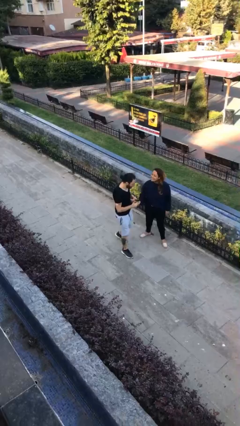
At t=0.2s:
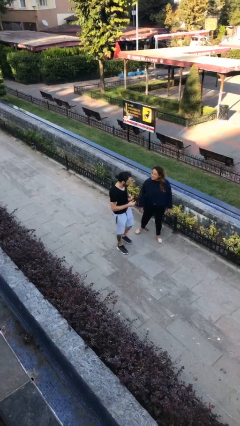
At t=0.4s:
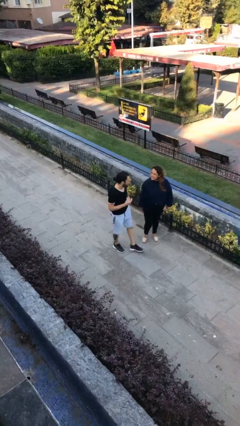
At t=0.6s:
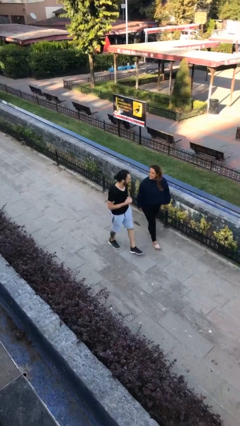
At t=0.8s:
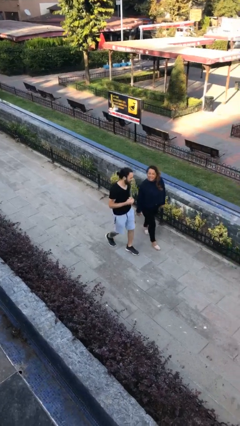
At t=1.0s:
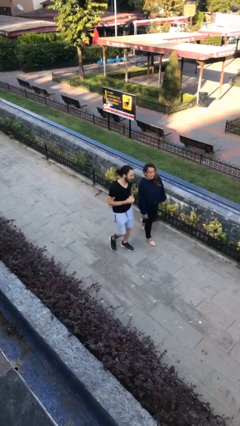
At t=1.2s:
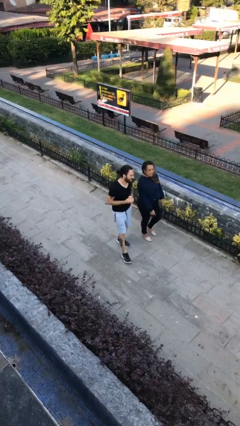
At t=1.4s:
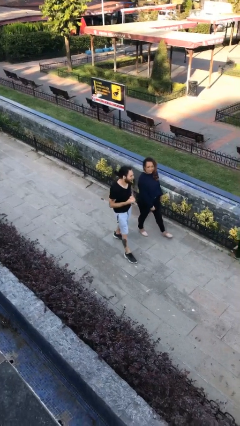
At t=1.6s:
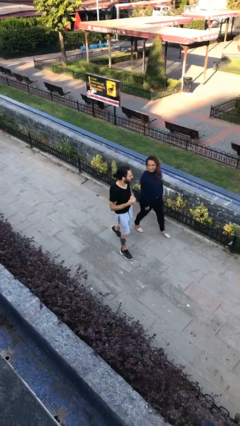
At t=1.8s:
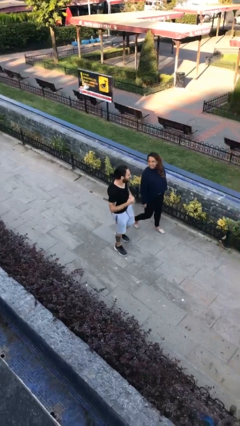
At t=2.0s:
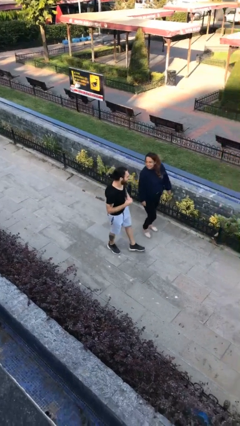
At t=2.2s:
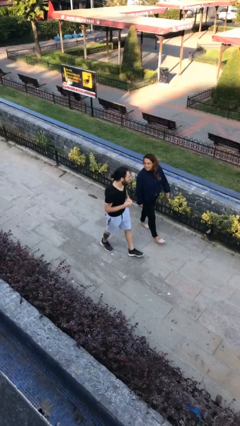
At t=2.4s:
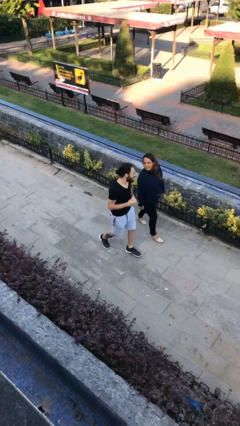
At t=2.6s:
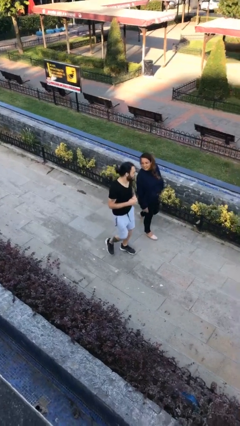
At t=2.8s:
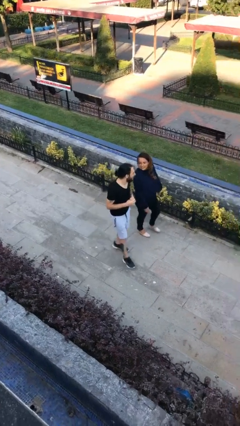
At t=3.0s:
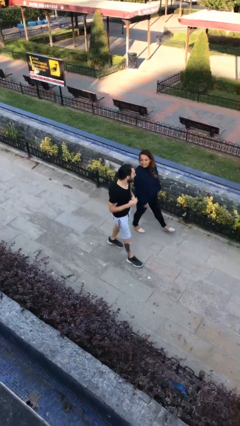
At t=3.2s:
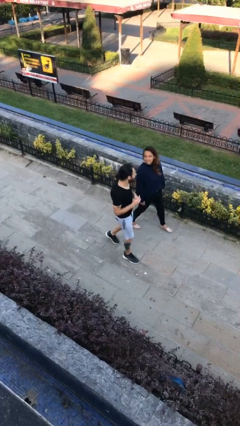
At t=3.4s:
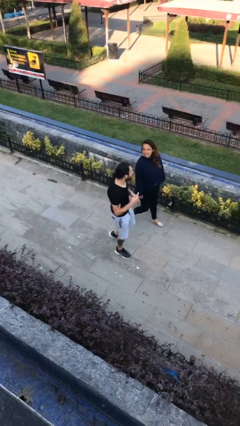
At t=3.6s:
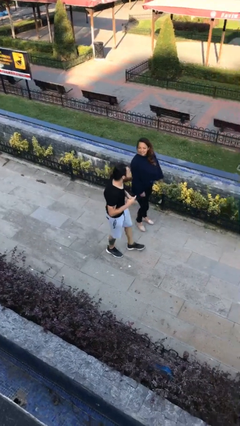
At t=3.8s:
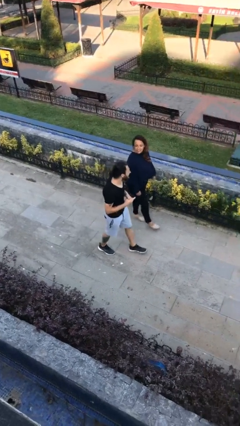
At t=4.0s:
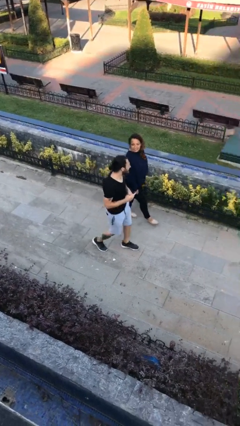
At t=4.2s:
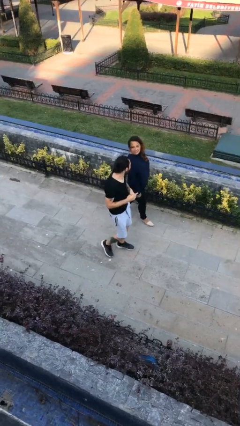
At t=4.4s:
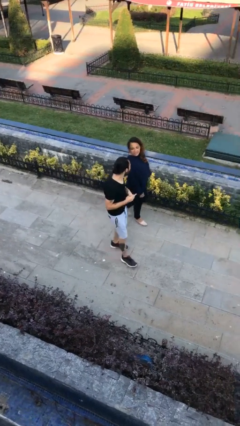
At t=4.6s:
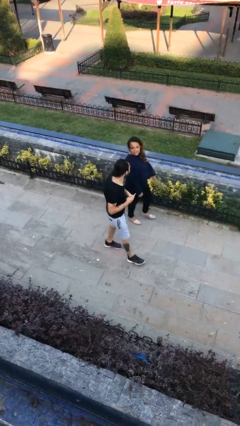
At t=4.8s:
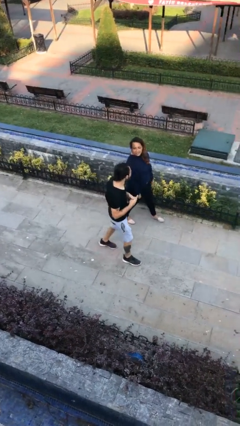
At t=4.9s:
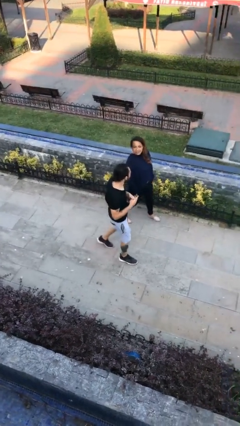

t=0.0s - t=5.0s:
person talks to person

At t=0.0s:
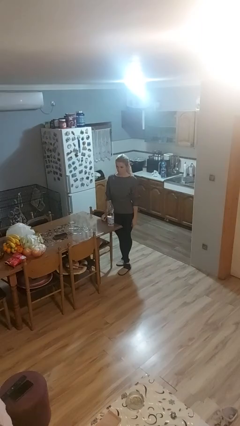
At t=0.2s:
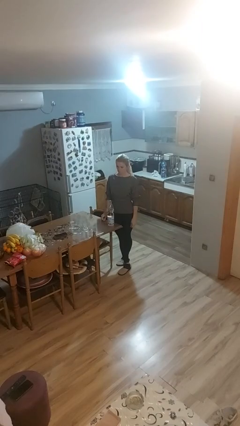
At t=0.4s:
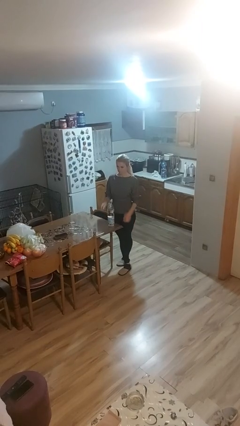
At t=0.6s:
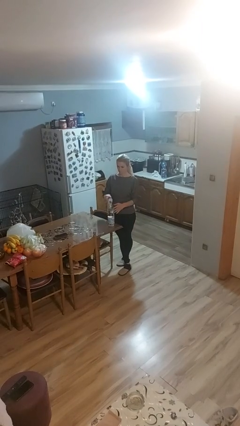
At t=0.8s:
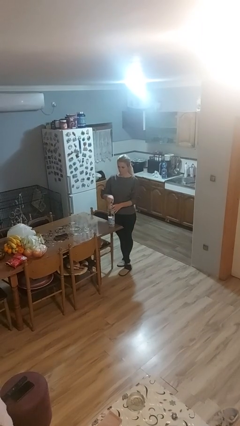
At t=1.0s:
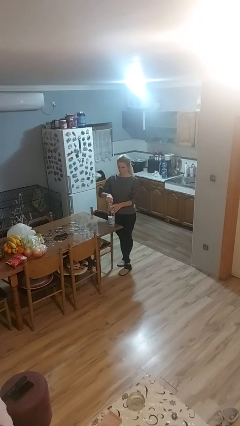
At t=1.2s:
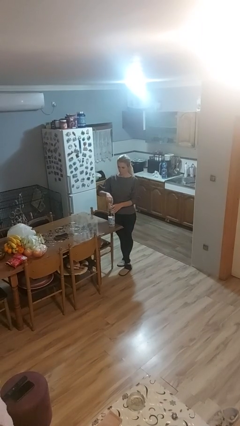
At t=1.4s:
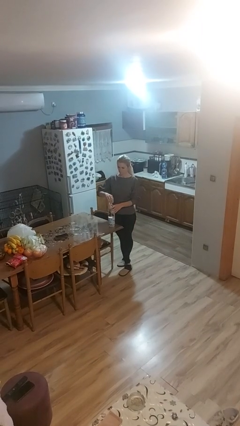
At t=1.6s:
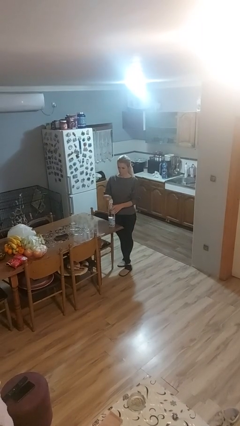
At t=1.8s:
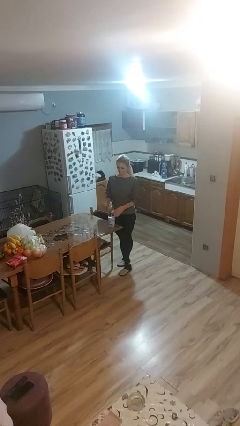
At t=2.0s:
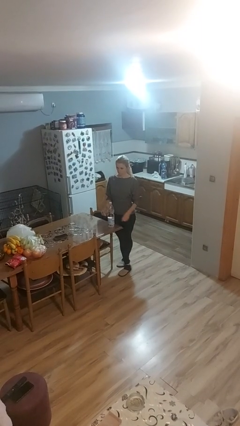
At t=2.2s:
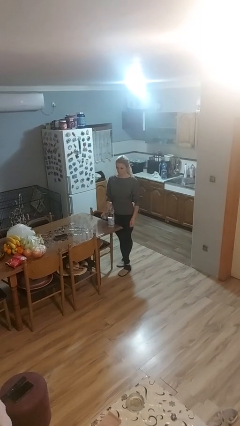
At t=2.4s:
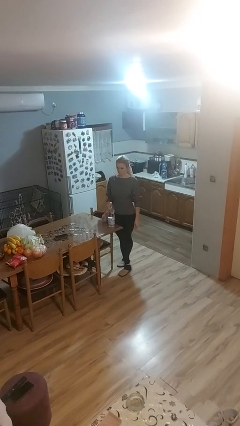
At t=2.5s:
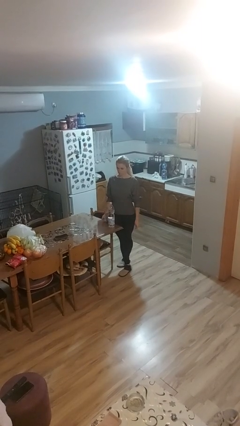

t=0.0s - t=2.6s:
person unscrews lid from bottle

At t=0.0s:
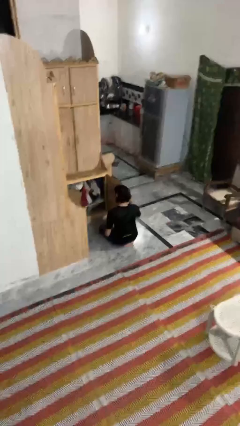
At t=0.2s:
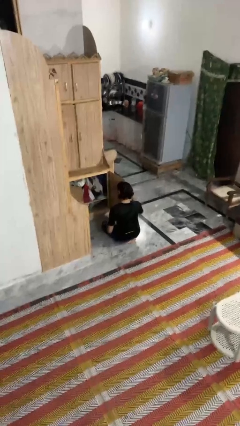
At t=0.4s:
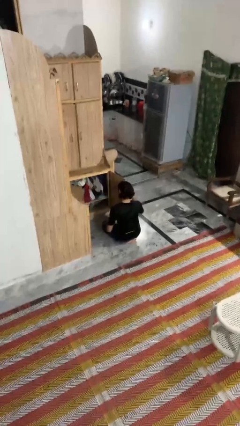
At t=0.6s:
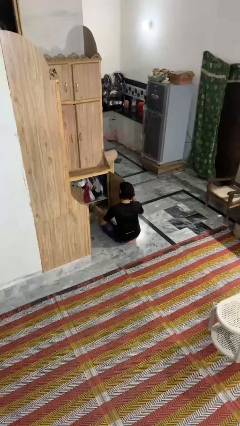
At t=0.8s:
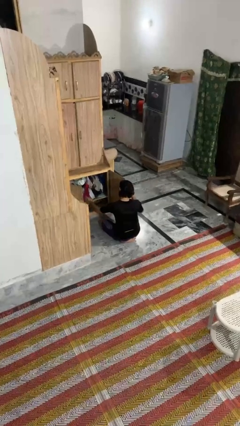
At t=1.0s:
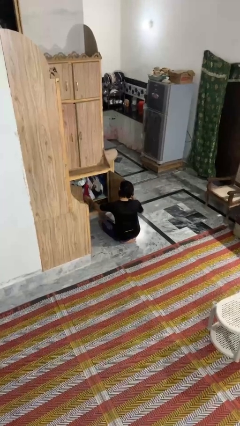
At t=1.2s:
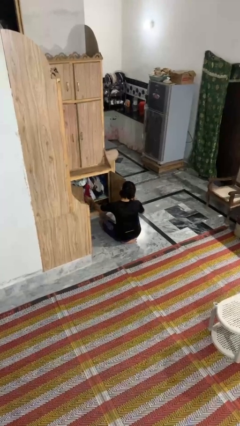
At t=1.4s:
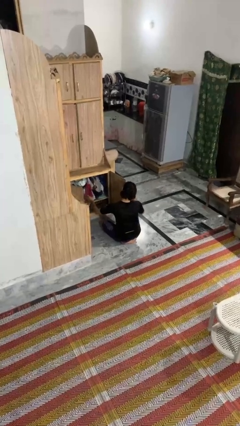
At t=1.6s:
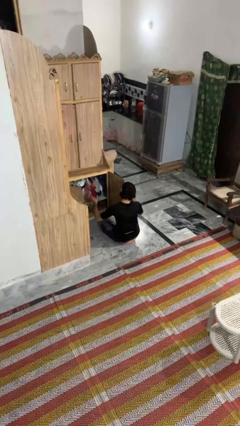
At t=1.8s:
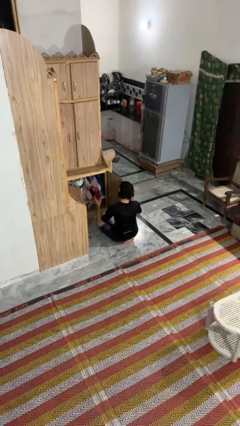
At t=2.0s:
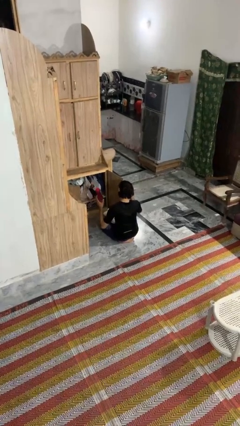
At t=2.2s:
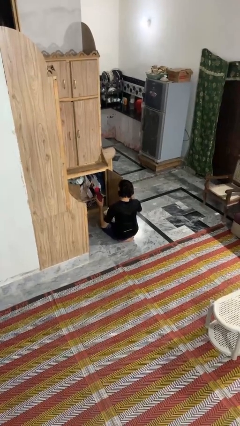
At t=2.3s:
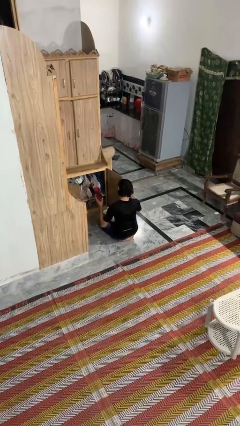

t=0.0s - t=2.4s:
person picks up object from cabinet

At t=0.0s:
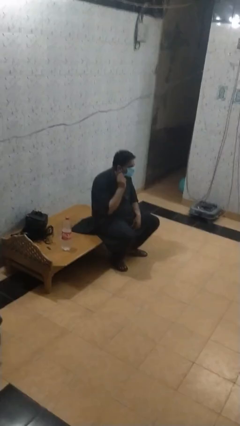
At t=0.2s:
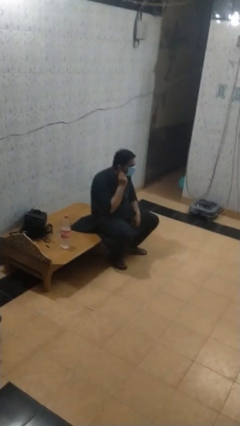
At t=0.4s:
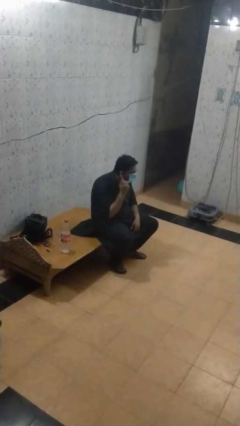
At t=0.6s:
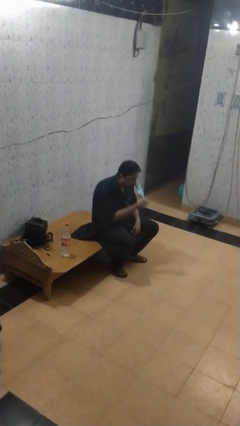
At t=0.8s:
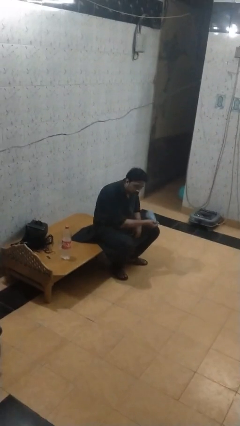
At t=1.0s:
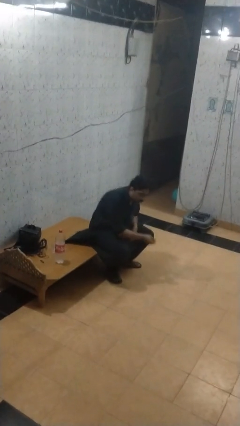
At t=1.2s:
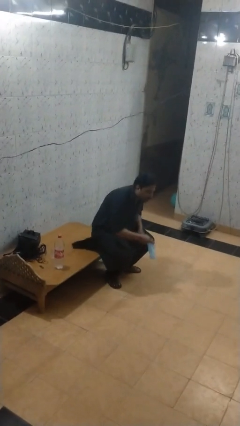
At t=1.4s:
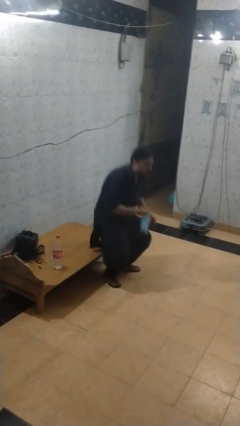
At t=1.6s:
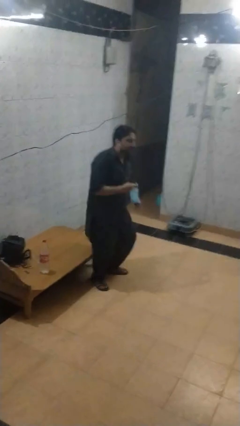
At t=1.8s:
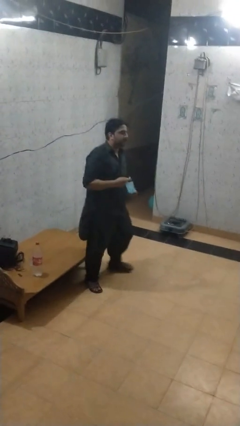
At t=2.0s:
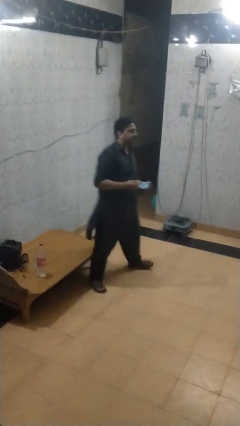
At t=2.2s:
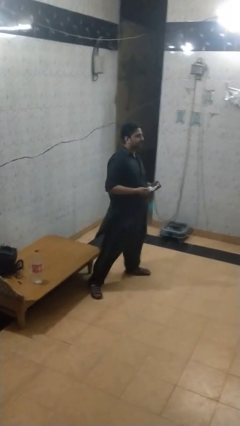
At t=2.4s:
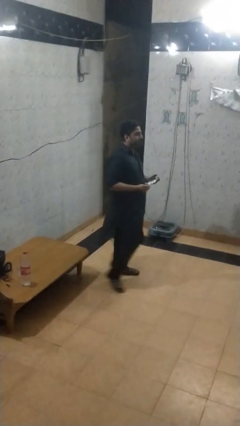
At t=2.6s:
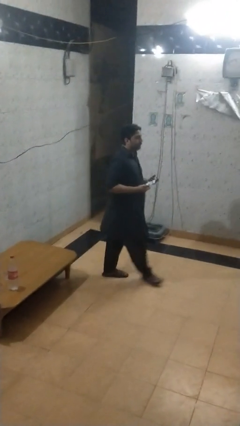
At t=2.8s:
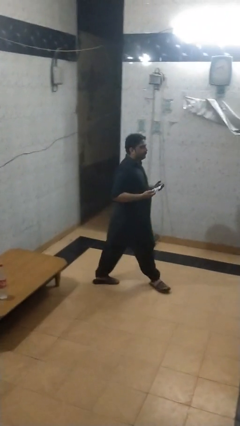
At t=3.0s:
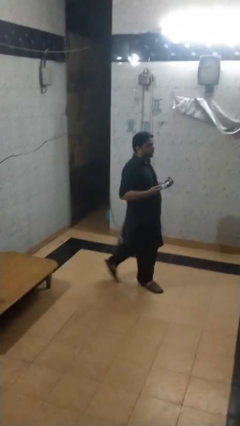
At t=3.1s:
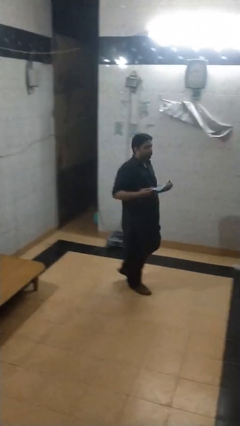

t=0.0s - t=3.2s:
person takes off facemask

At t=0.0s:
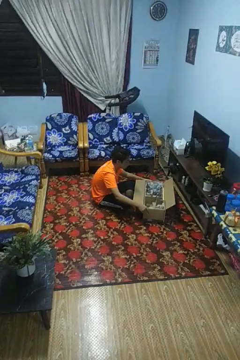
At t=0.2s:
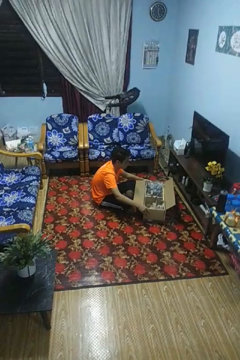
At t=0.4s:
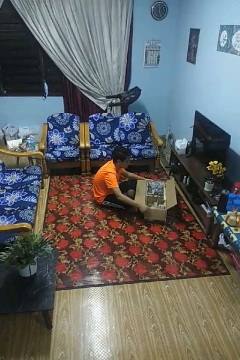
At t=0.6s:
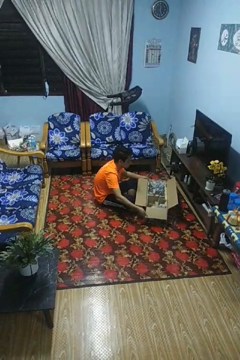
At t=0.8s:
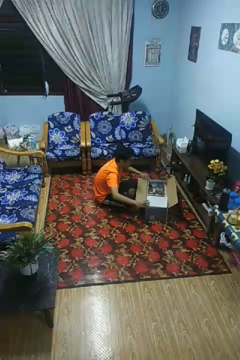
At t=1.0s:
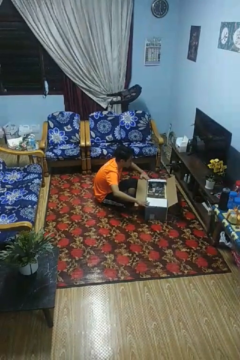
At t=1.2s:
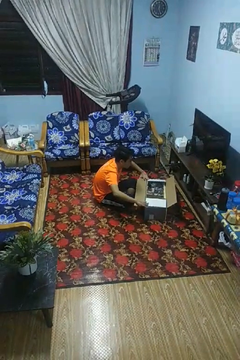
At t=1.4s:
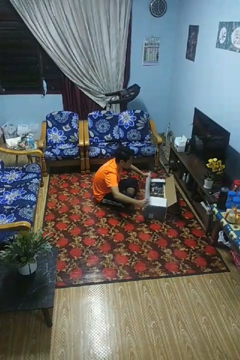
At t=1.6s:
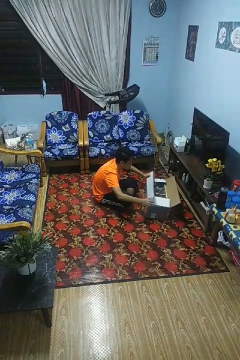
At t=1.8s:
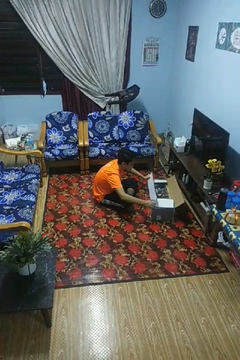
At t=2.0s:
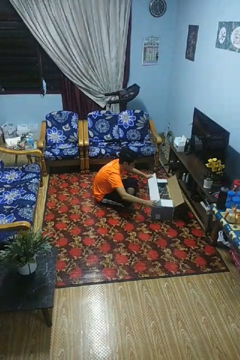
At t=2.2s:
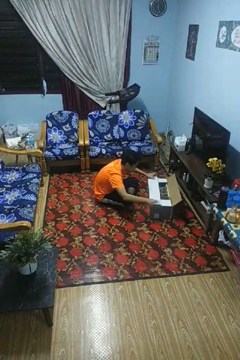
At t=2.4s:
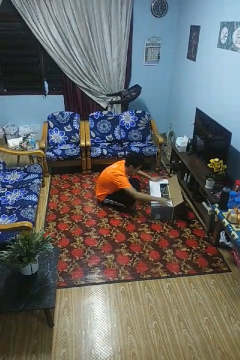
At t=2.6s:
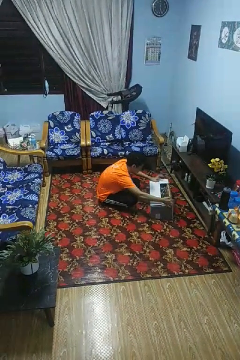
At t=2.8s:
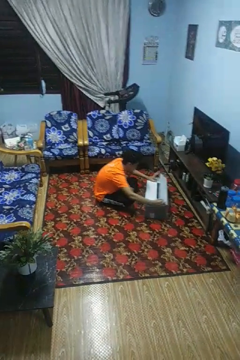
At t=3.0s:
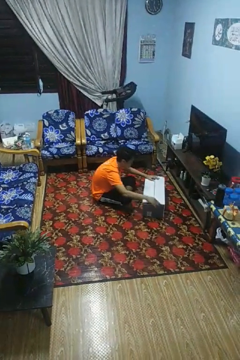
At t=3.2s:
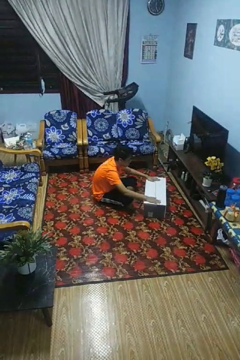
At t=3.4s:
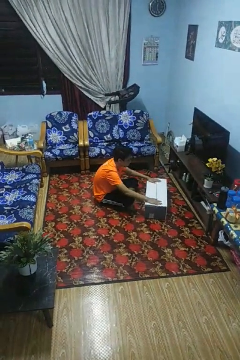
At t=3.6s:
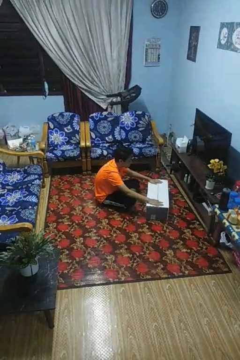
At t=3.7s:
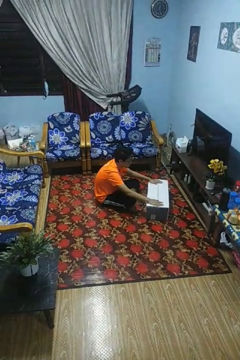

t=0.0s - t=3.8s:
person closes box

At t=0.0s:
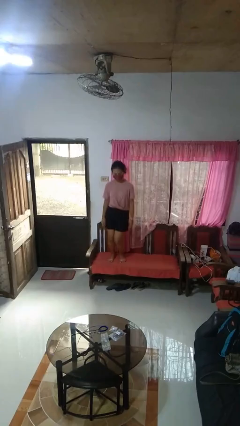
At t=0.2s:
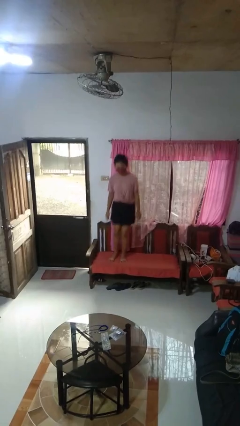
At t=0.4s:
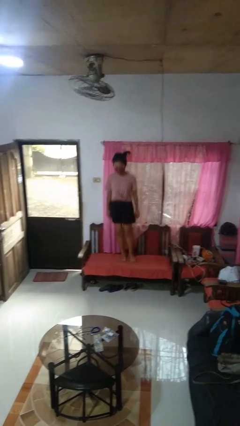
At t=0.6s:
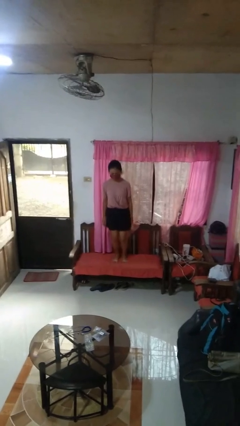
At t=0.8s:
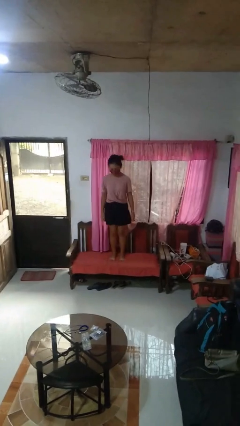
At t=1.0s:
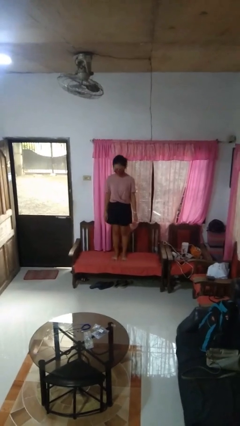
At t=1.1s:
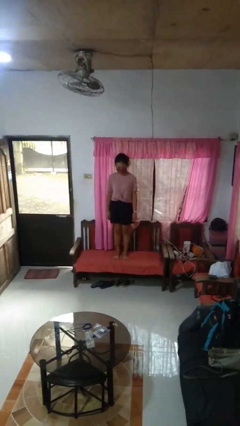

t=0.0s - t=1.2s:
person jumps on couch
